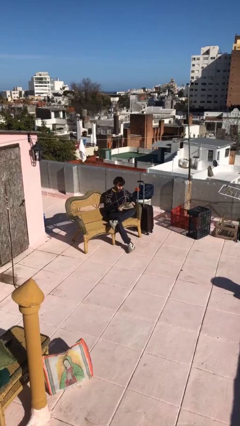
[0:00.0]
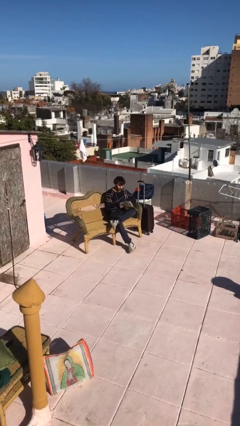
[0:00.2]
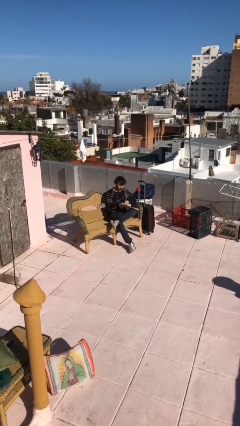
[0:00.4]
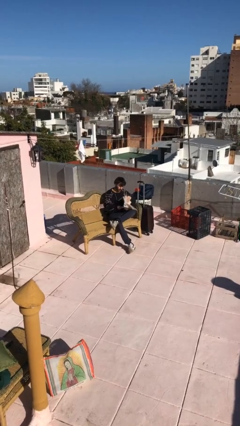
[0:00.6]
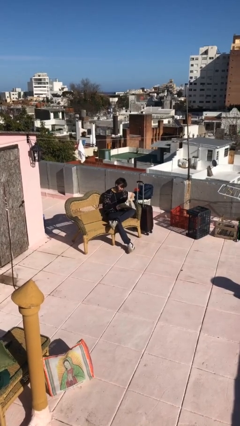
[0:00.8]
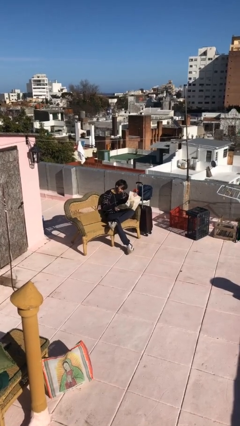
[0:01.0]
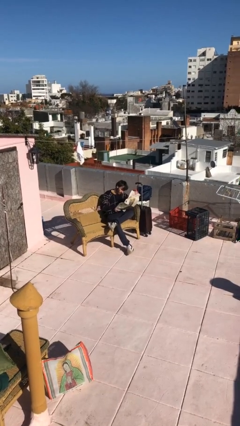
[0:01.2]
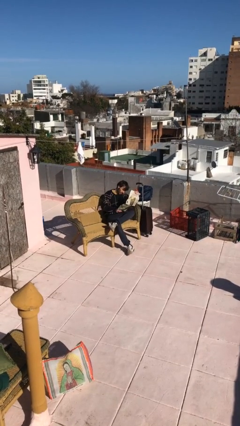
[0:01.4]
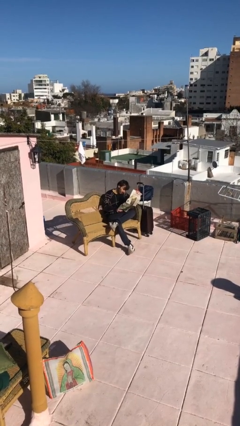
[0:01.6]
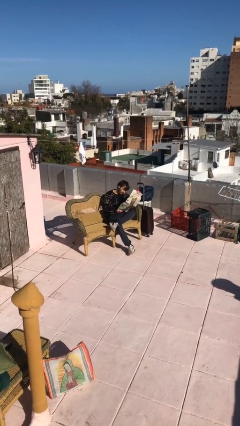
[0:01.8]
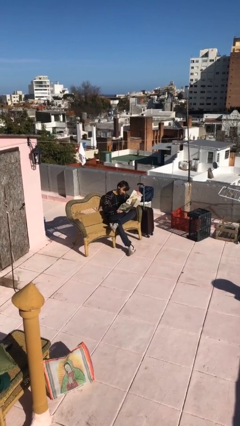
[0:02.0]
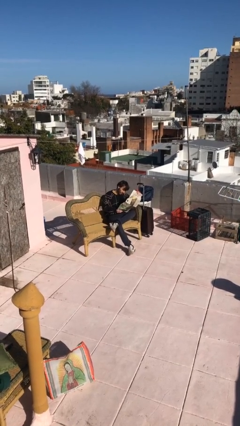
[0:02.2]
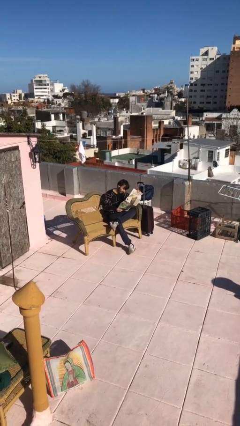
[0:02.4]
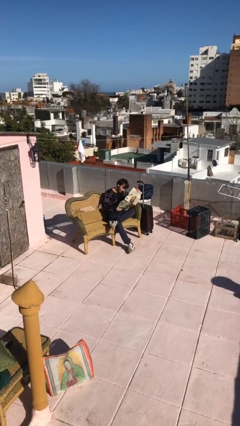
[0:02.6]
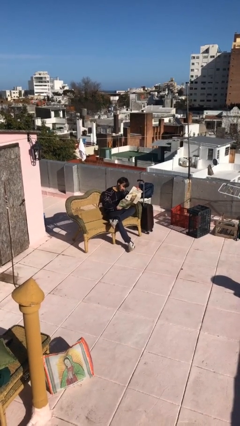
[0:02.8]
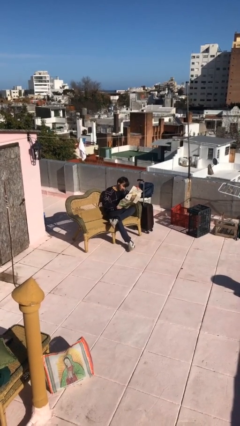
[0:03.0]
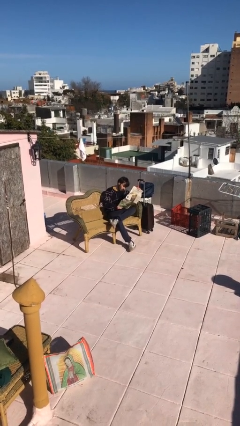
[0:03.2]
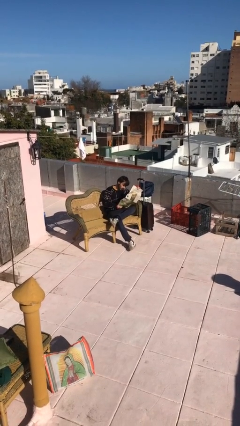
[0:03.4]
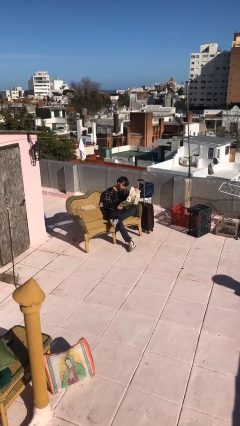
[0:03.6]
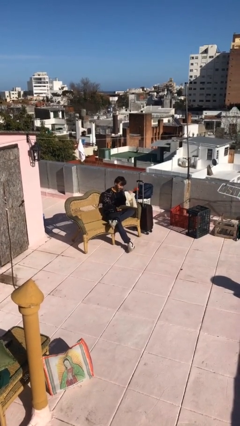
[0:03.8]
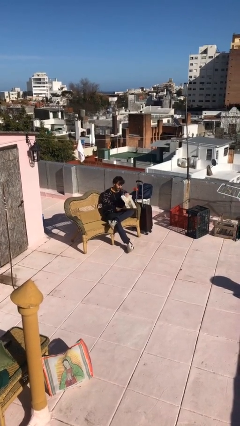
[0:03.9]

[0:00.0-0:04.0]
person reads newspaper

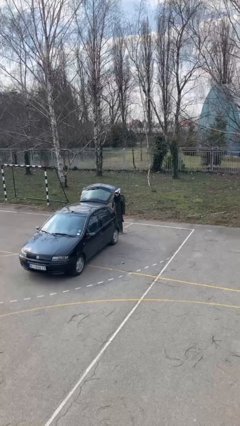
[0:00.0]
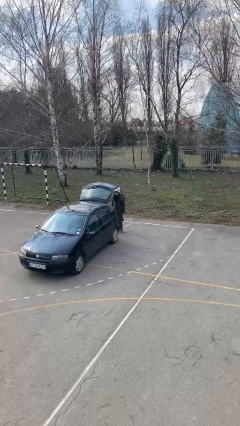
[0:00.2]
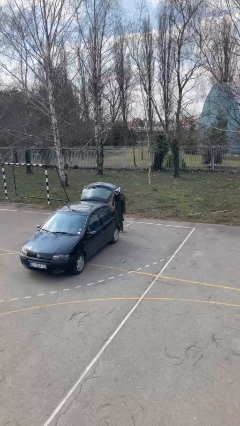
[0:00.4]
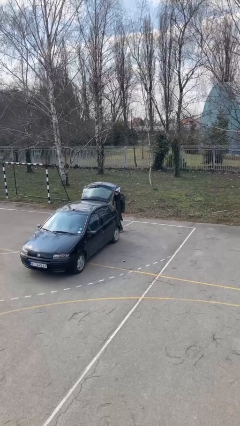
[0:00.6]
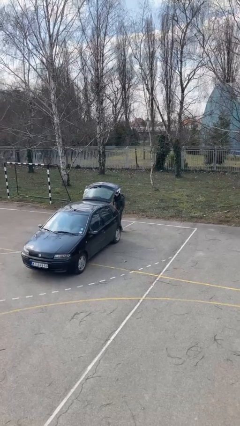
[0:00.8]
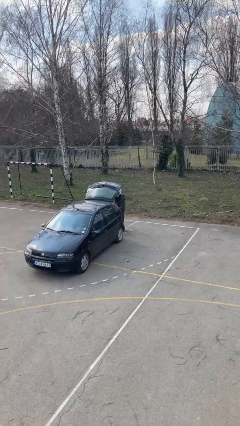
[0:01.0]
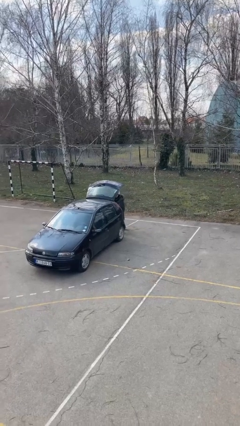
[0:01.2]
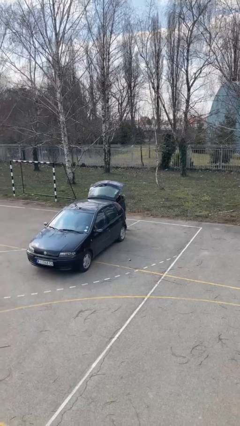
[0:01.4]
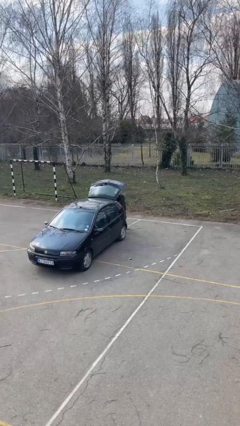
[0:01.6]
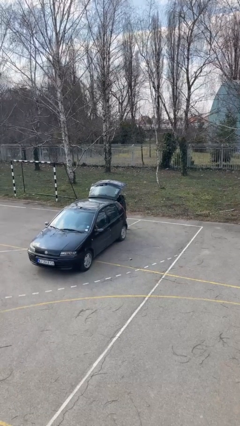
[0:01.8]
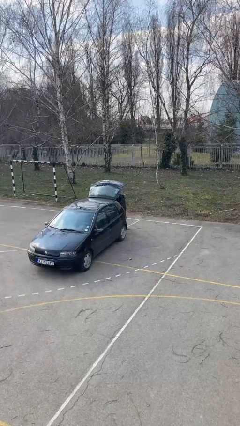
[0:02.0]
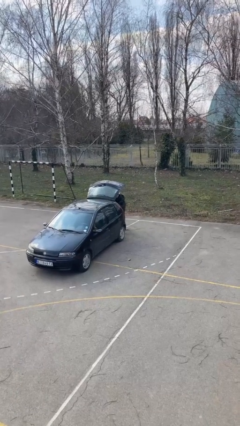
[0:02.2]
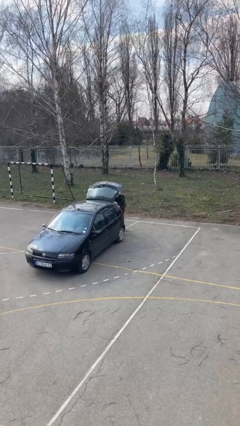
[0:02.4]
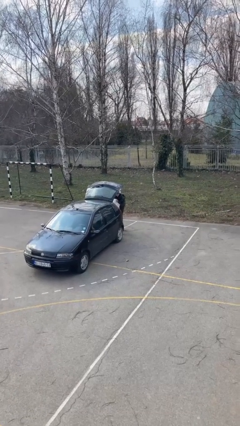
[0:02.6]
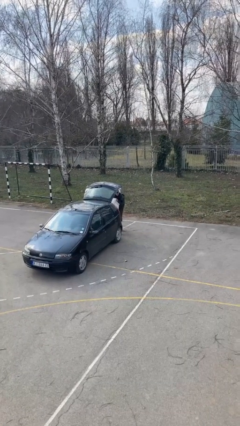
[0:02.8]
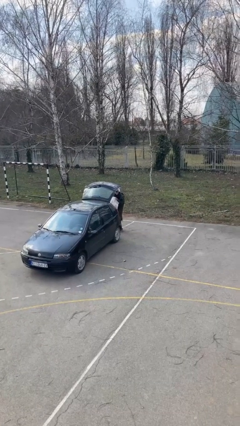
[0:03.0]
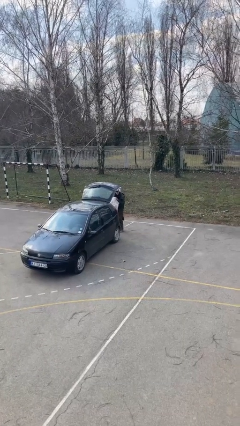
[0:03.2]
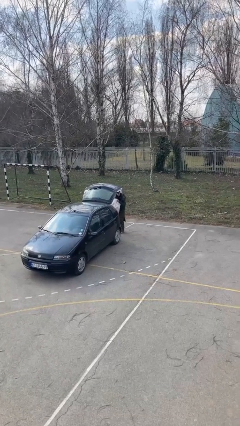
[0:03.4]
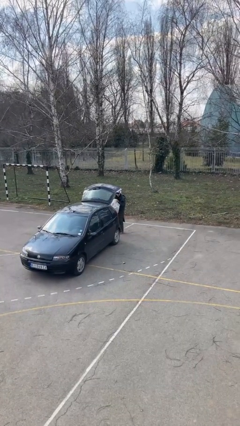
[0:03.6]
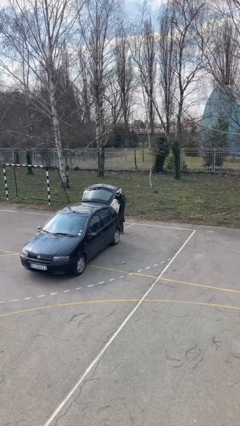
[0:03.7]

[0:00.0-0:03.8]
person unloads car

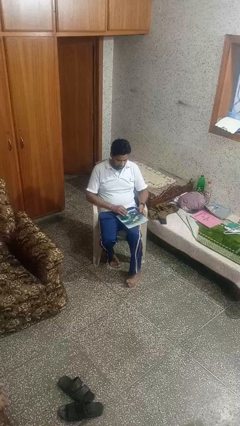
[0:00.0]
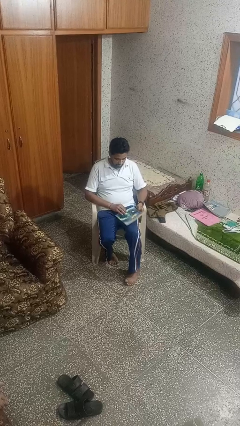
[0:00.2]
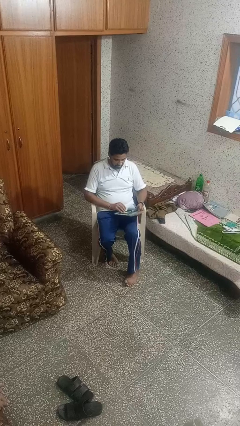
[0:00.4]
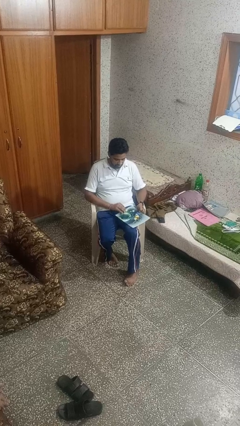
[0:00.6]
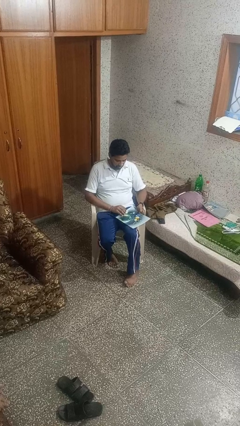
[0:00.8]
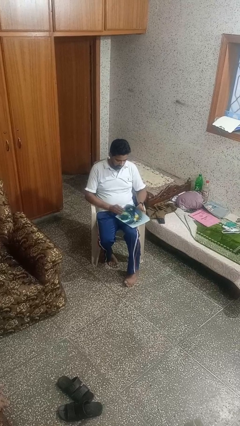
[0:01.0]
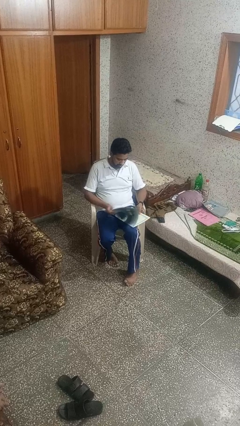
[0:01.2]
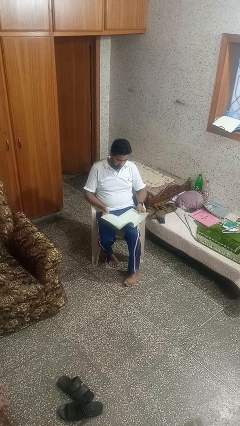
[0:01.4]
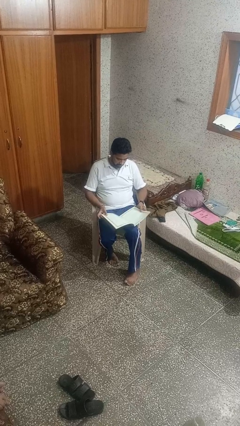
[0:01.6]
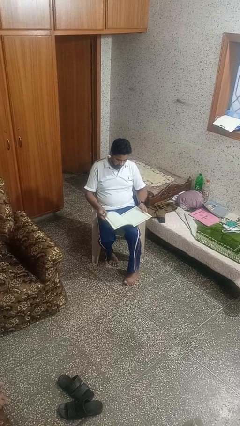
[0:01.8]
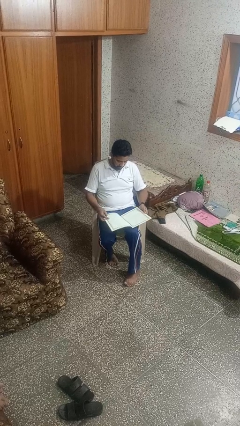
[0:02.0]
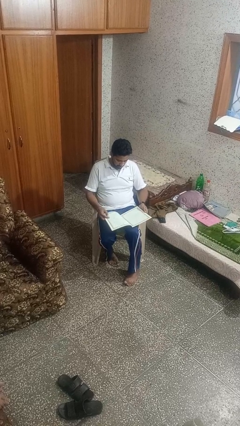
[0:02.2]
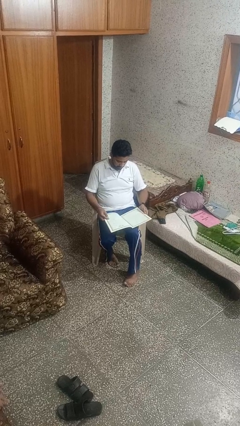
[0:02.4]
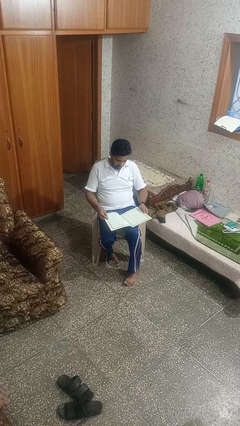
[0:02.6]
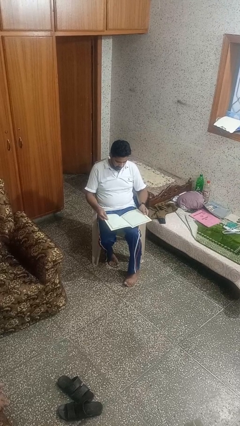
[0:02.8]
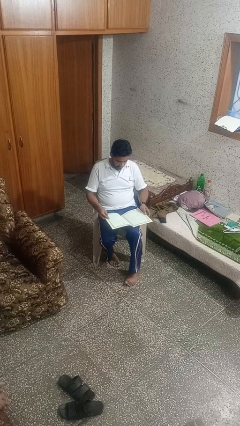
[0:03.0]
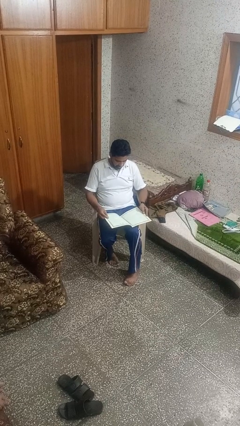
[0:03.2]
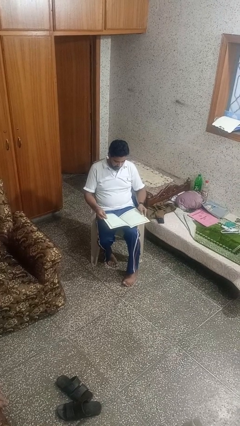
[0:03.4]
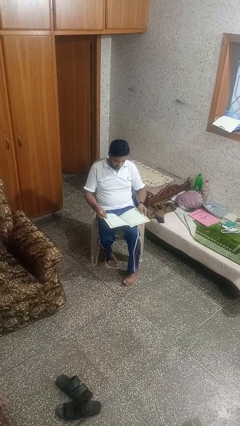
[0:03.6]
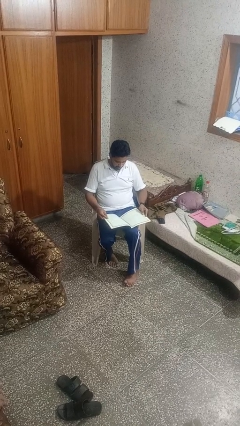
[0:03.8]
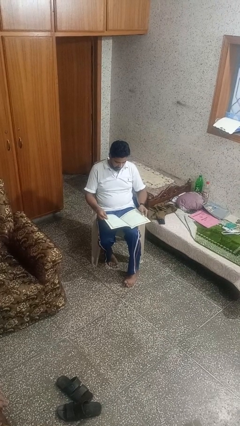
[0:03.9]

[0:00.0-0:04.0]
person reads magazine

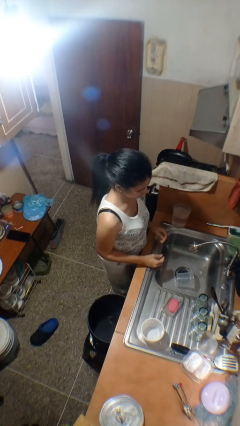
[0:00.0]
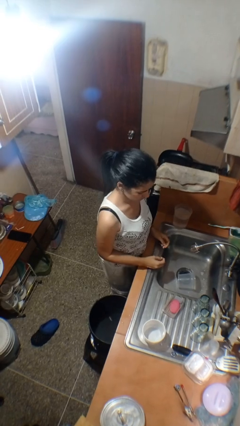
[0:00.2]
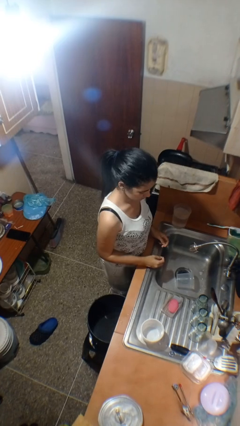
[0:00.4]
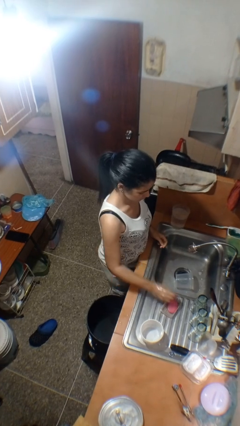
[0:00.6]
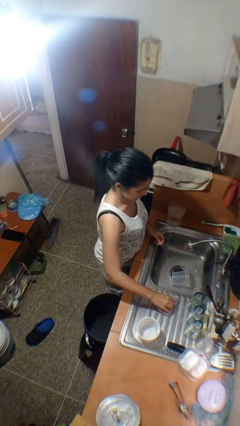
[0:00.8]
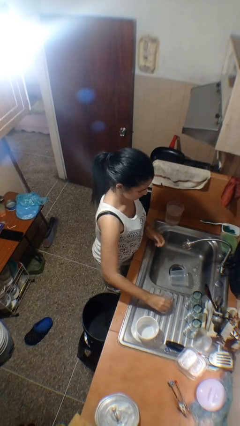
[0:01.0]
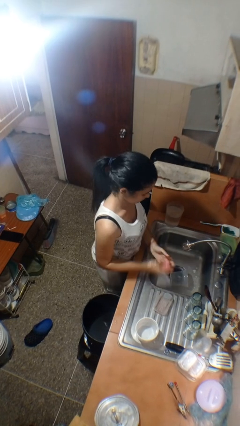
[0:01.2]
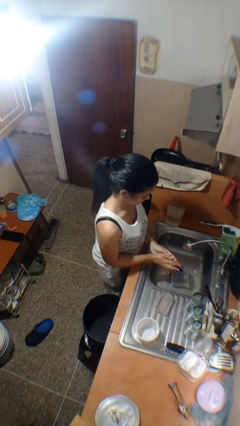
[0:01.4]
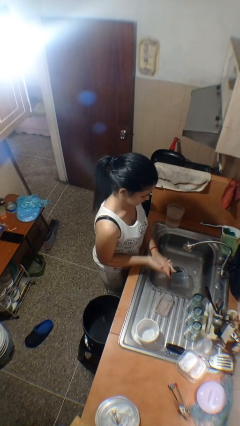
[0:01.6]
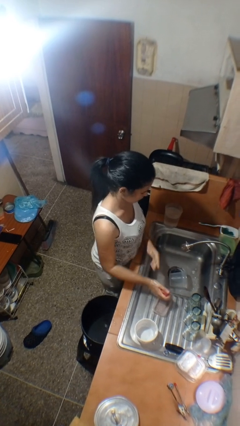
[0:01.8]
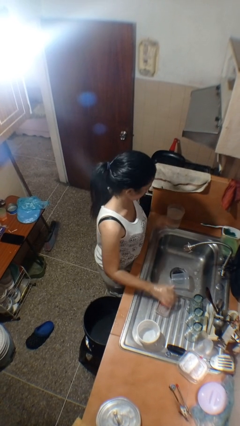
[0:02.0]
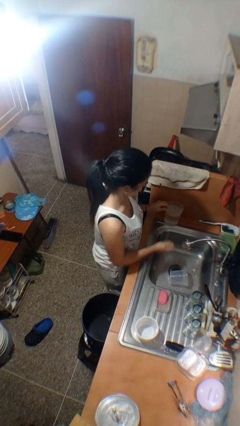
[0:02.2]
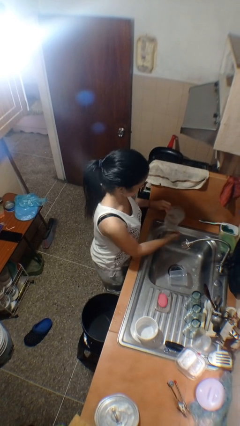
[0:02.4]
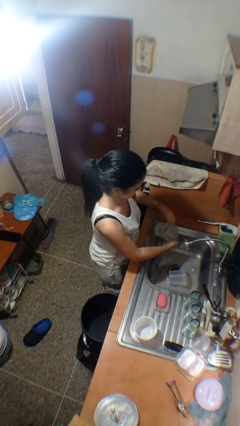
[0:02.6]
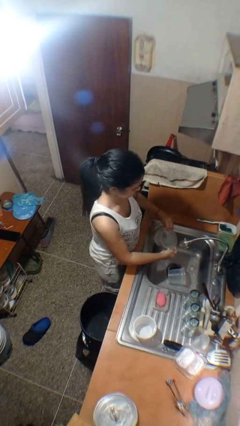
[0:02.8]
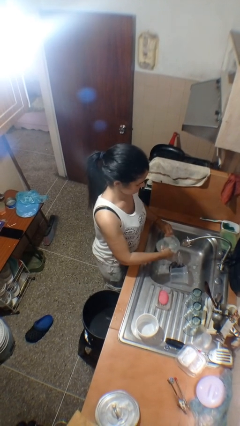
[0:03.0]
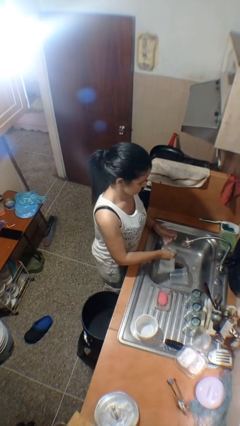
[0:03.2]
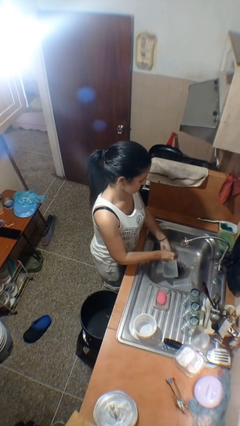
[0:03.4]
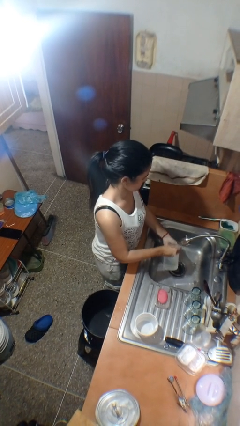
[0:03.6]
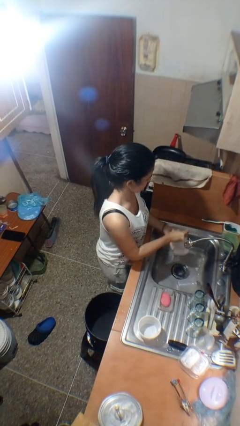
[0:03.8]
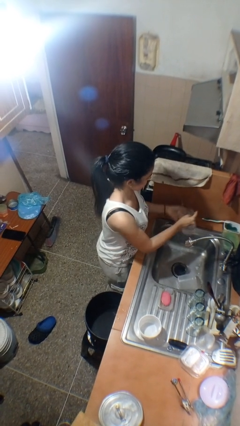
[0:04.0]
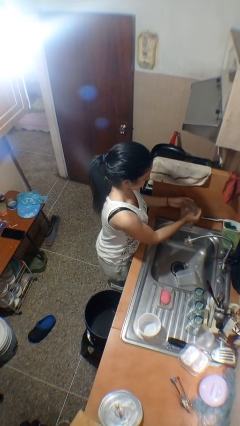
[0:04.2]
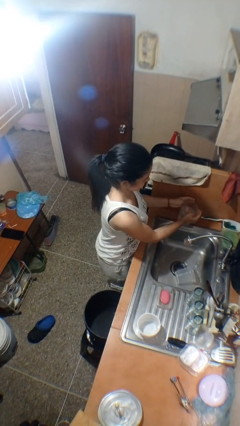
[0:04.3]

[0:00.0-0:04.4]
person washes hands

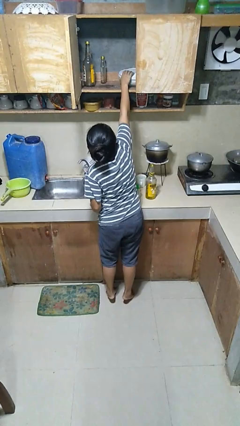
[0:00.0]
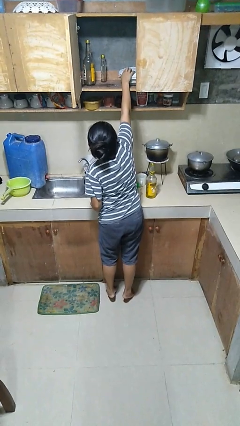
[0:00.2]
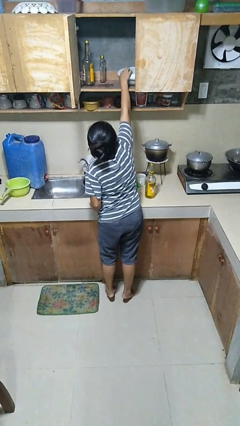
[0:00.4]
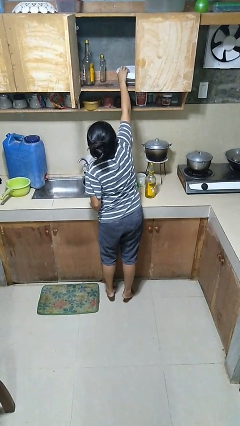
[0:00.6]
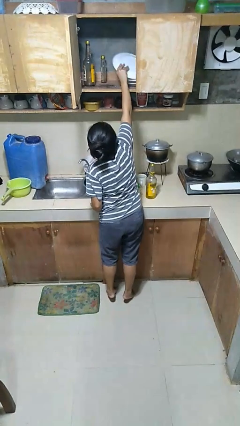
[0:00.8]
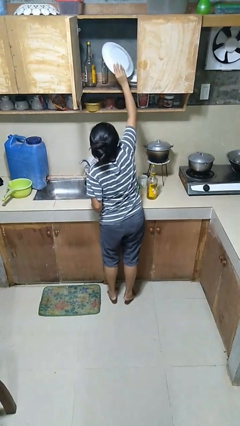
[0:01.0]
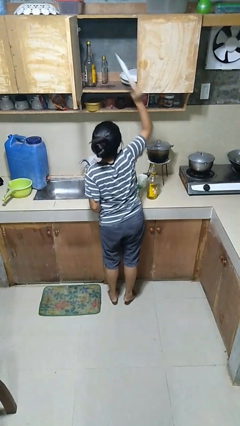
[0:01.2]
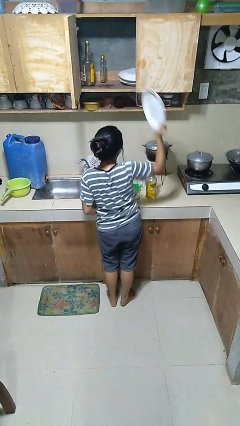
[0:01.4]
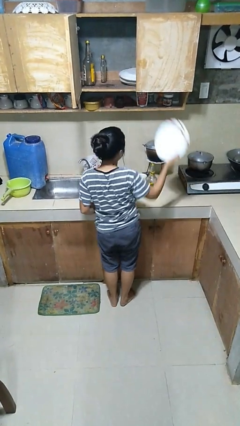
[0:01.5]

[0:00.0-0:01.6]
person takes object from cabinet

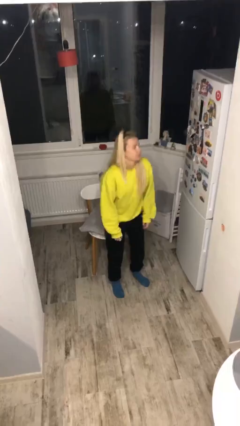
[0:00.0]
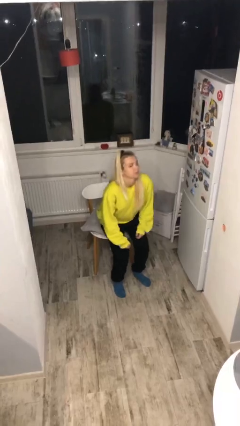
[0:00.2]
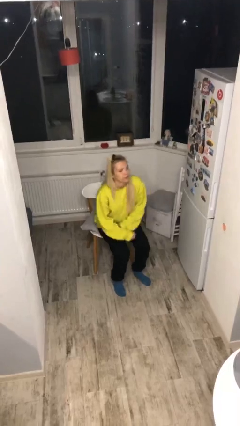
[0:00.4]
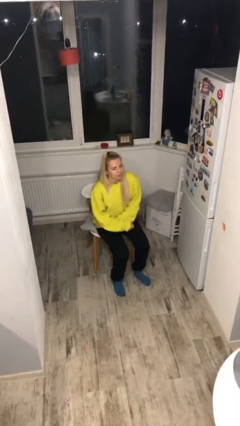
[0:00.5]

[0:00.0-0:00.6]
person sits down
